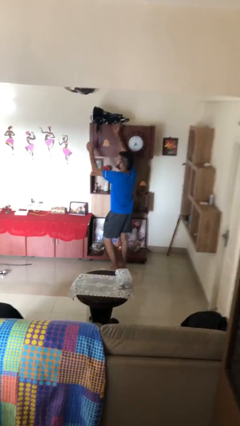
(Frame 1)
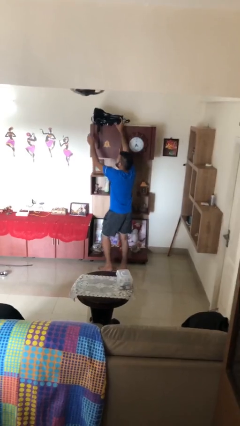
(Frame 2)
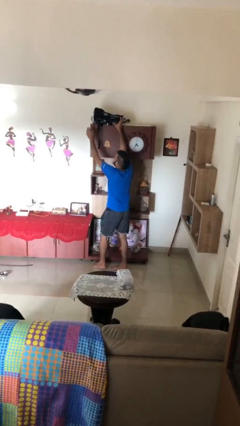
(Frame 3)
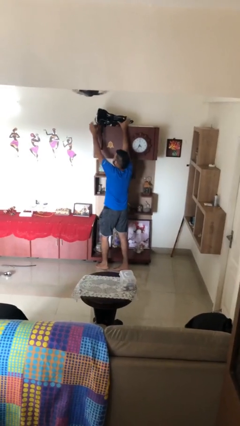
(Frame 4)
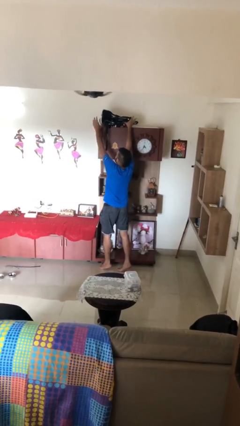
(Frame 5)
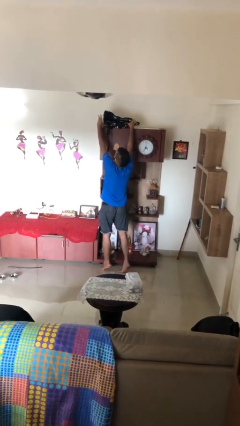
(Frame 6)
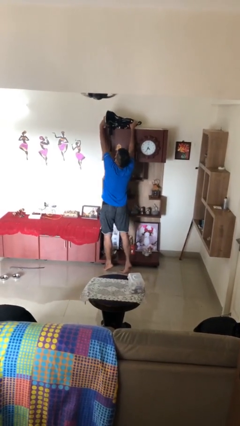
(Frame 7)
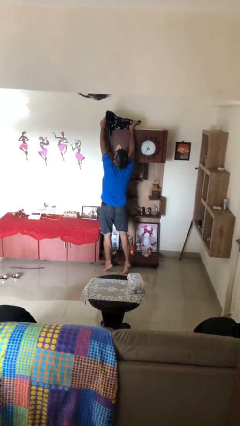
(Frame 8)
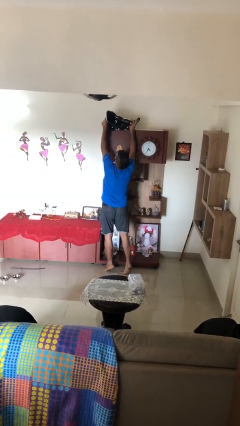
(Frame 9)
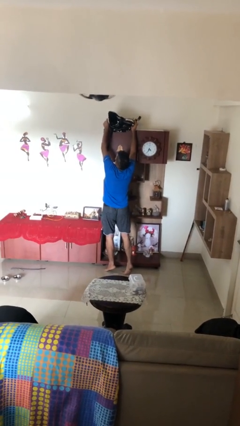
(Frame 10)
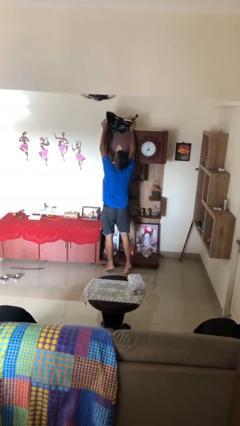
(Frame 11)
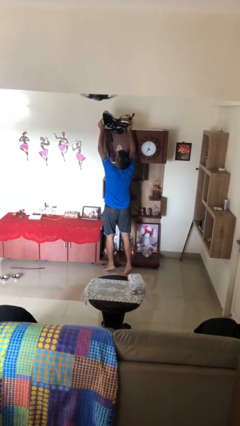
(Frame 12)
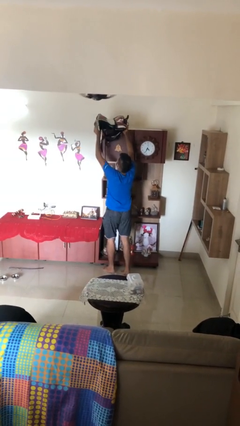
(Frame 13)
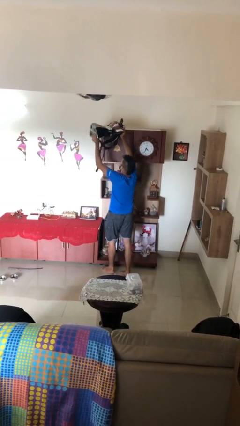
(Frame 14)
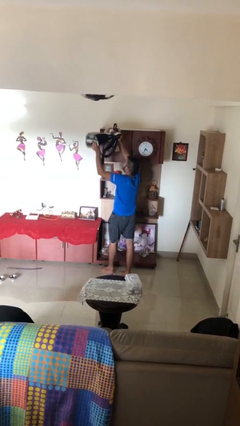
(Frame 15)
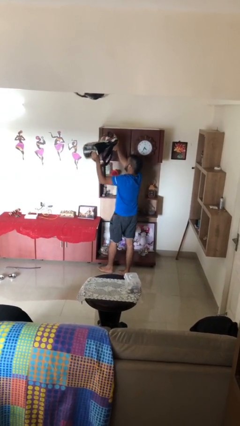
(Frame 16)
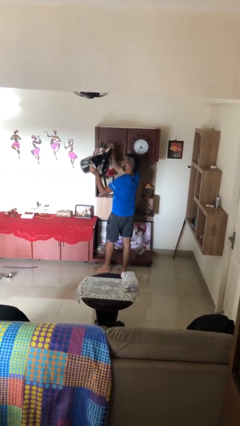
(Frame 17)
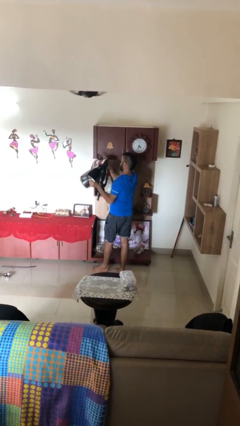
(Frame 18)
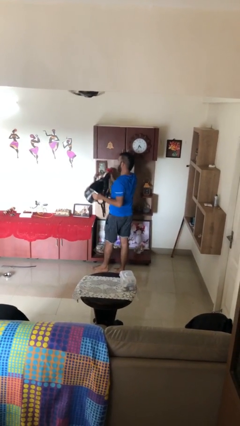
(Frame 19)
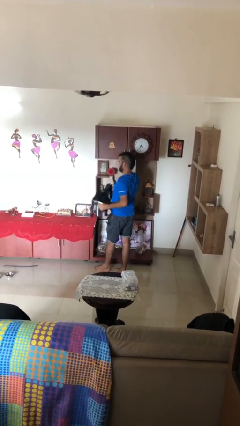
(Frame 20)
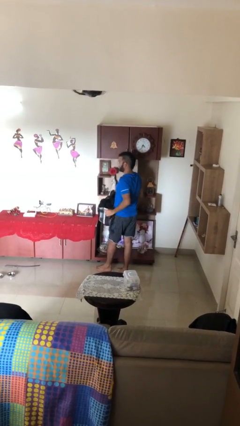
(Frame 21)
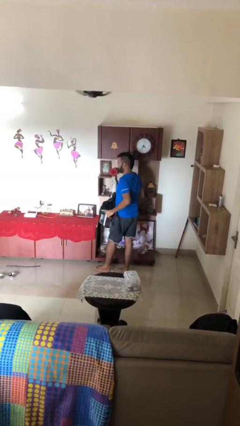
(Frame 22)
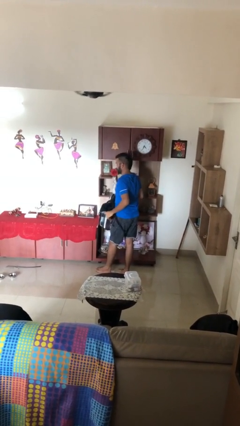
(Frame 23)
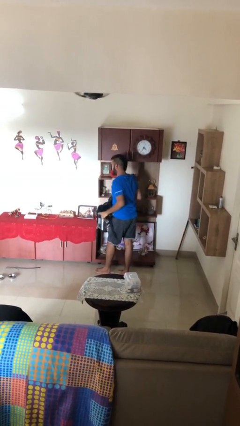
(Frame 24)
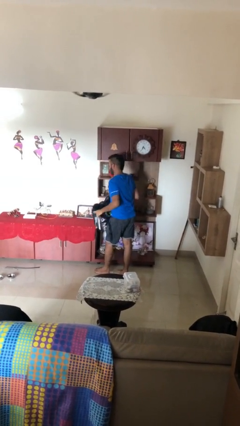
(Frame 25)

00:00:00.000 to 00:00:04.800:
person picks up object from shelf

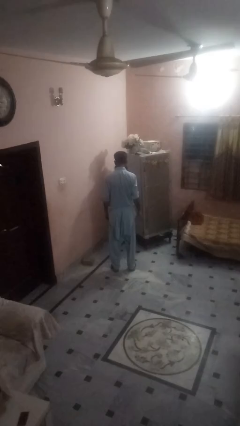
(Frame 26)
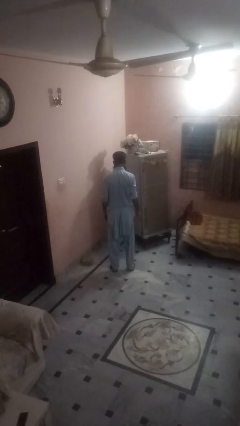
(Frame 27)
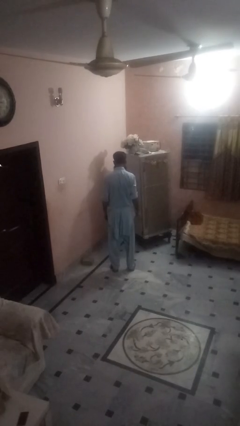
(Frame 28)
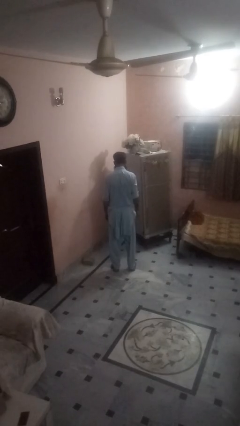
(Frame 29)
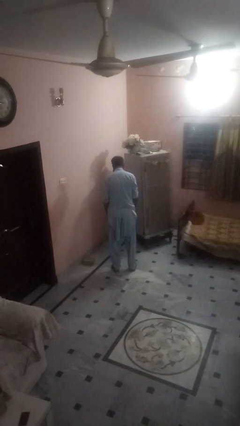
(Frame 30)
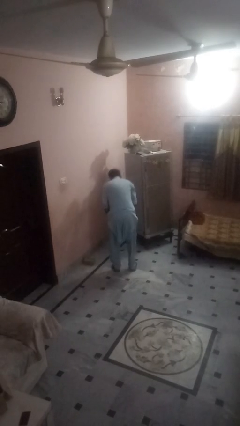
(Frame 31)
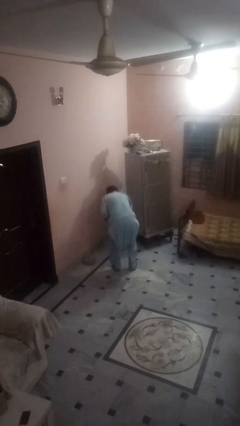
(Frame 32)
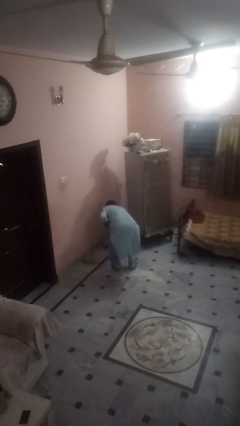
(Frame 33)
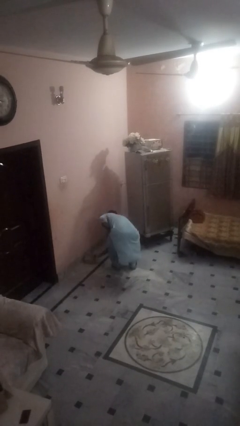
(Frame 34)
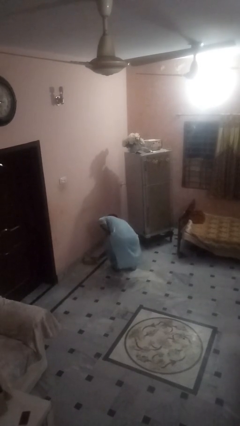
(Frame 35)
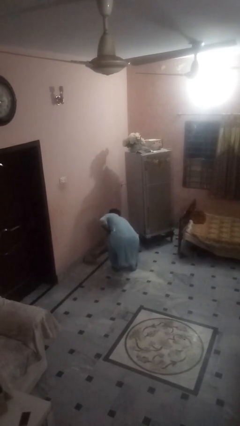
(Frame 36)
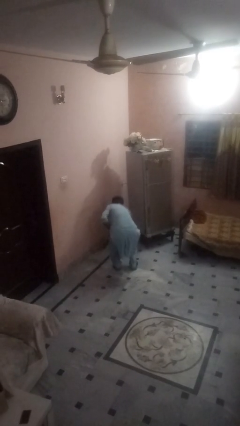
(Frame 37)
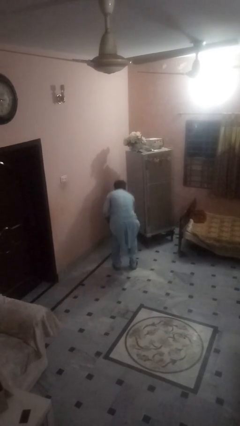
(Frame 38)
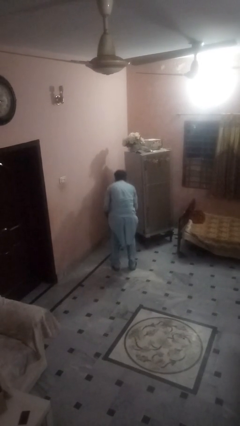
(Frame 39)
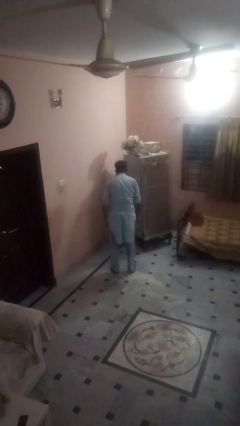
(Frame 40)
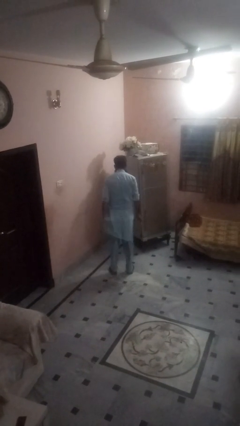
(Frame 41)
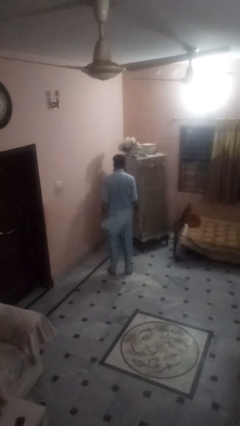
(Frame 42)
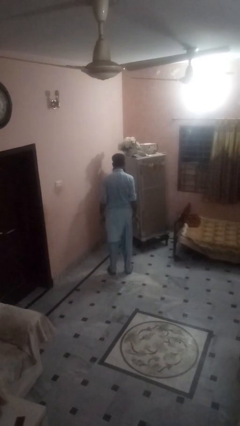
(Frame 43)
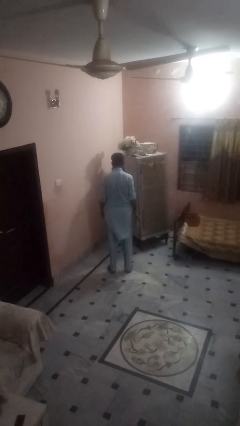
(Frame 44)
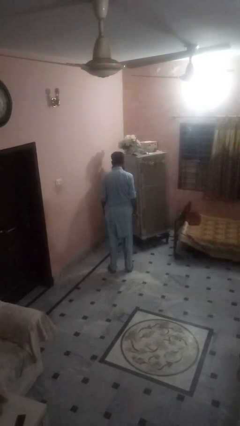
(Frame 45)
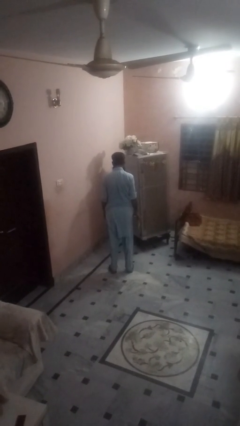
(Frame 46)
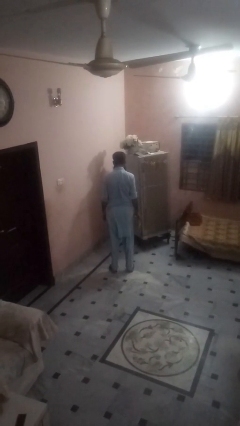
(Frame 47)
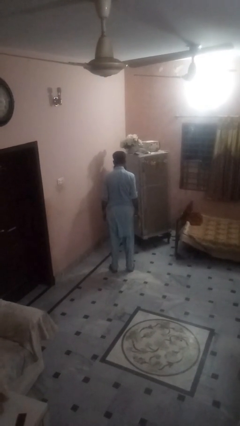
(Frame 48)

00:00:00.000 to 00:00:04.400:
person picks up object from floor

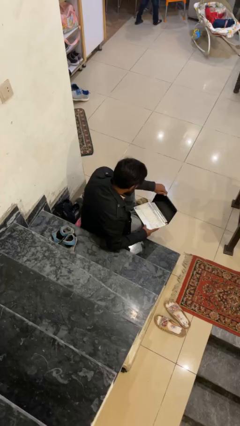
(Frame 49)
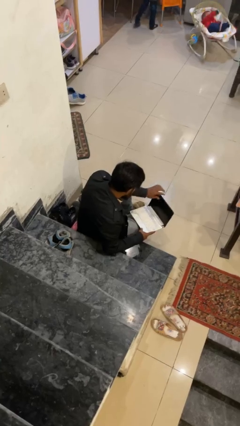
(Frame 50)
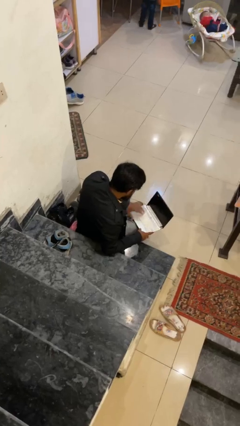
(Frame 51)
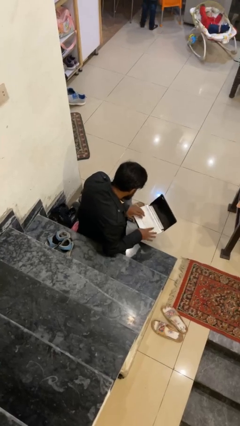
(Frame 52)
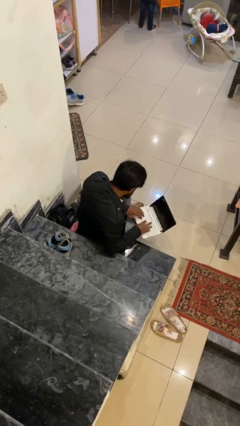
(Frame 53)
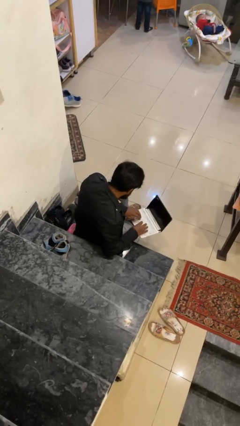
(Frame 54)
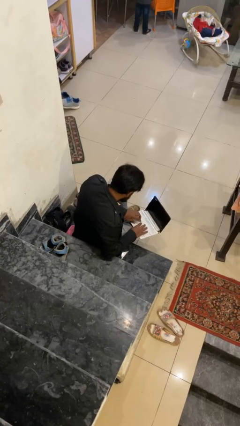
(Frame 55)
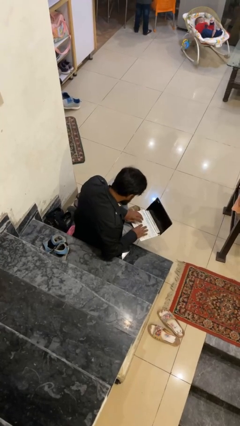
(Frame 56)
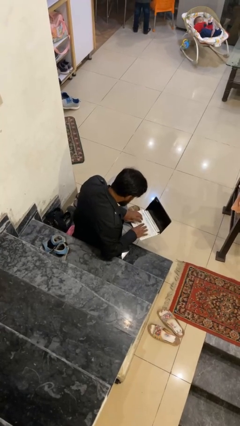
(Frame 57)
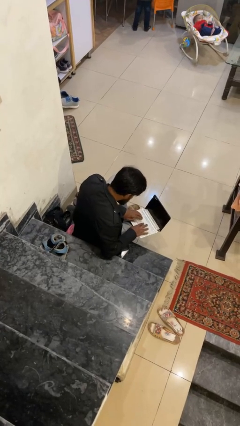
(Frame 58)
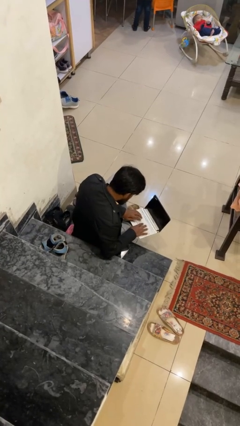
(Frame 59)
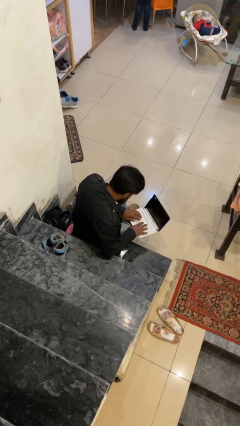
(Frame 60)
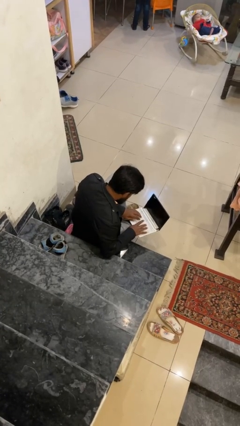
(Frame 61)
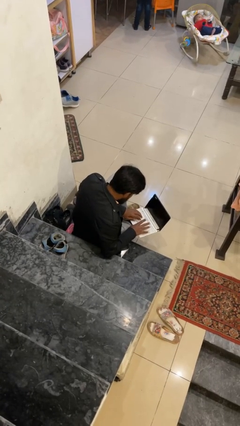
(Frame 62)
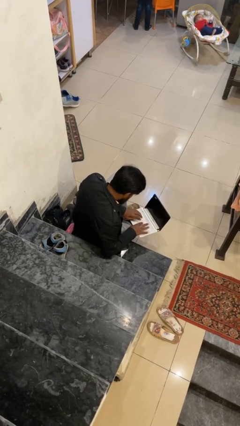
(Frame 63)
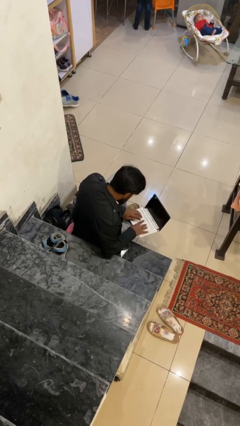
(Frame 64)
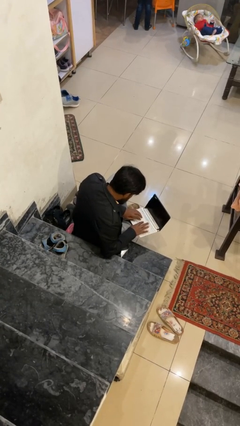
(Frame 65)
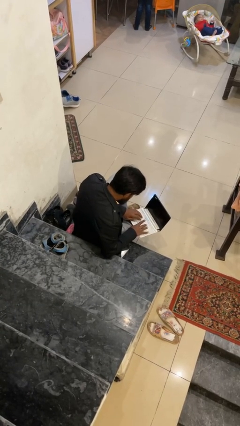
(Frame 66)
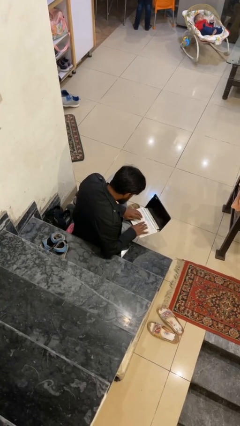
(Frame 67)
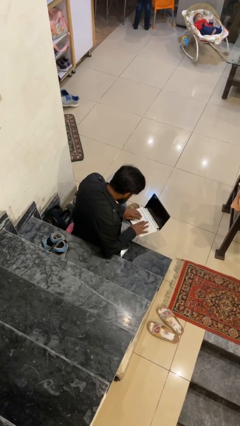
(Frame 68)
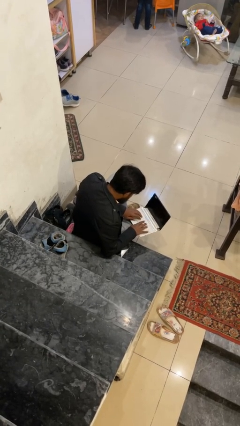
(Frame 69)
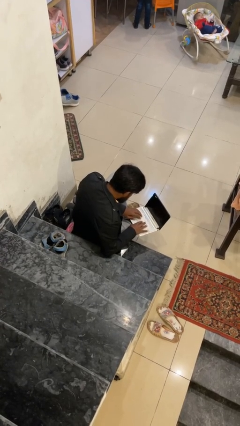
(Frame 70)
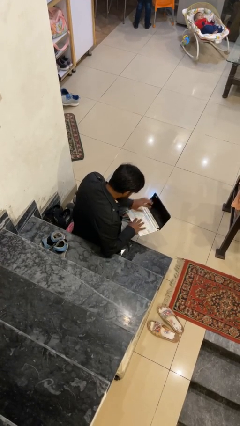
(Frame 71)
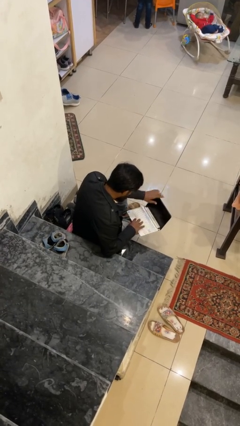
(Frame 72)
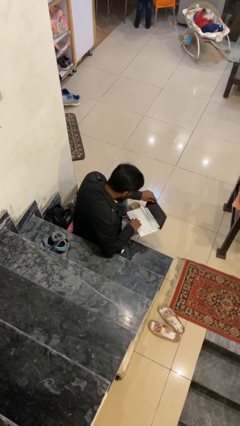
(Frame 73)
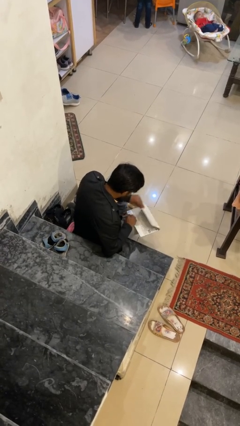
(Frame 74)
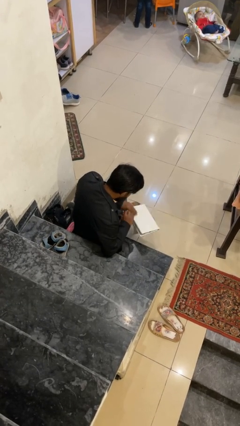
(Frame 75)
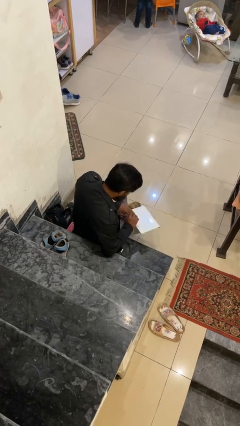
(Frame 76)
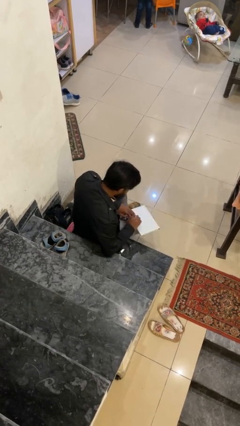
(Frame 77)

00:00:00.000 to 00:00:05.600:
person interacts with laptop

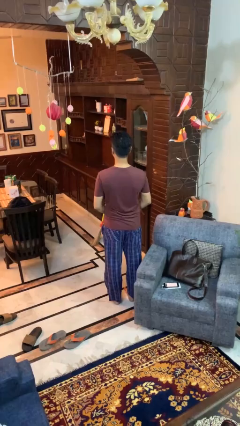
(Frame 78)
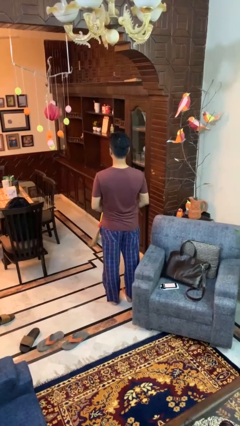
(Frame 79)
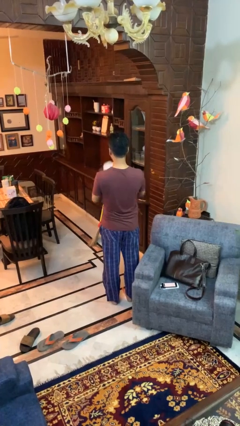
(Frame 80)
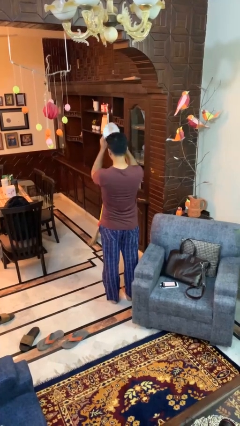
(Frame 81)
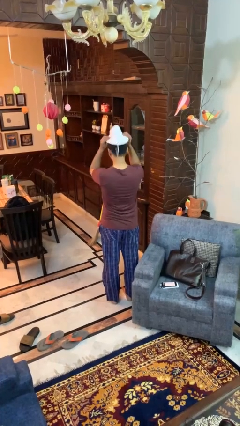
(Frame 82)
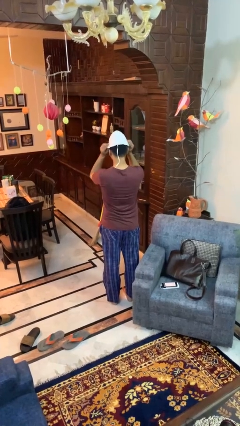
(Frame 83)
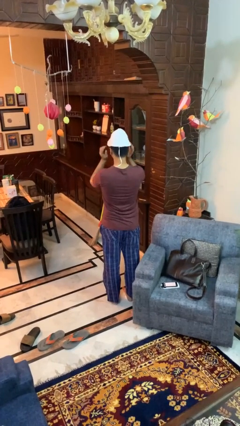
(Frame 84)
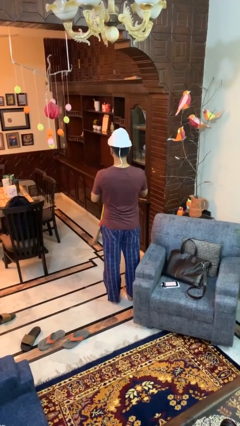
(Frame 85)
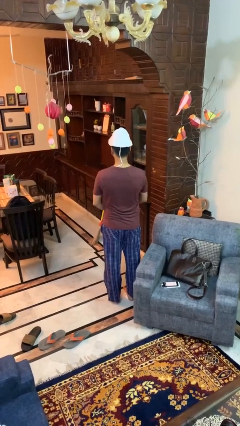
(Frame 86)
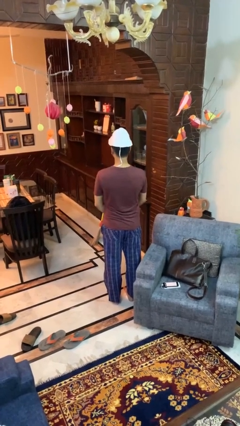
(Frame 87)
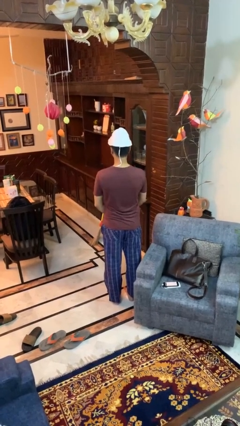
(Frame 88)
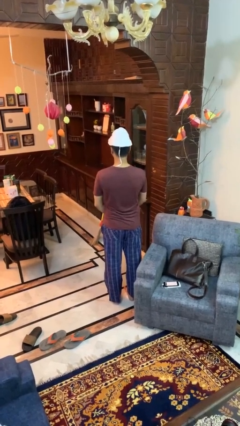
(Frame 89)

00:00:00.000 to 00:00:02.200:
person puts on hat

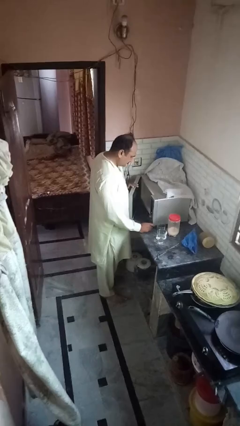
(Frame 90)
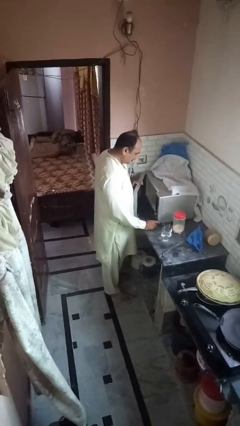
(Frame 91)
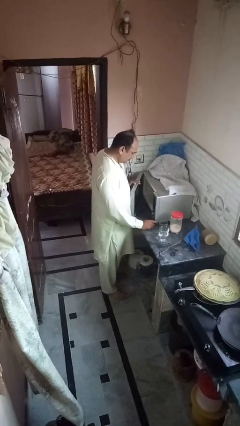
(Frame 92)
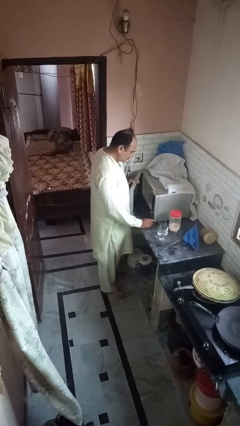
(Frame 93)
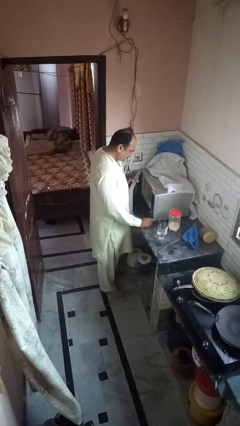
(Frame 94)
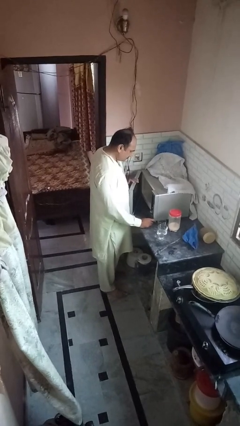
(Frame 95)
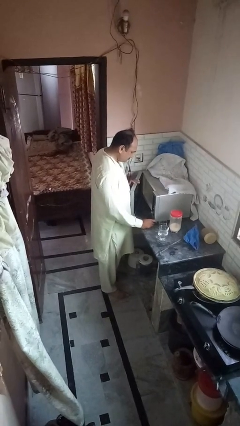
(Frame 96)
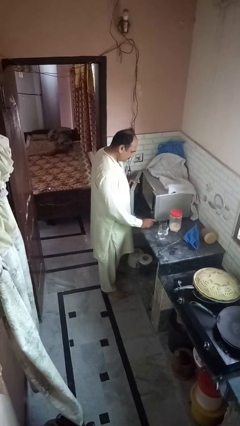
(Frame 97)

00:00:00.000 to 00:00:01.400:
person opens microwave
